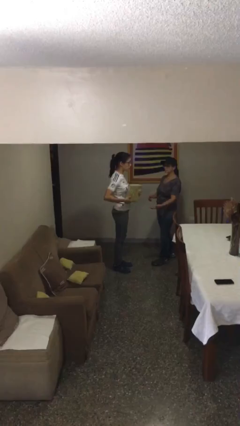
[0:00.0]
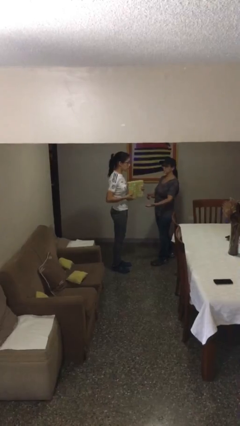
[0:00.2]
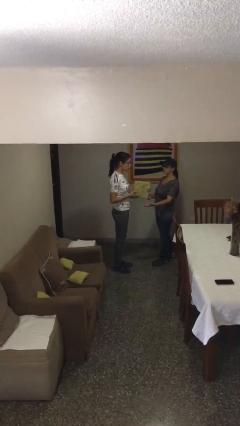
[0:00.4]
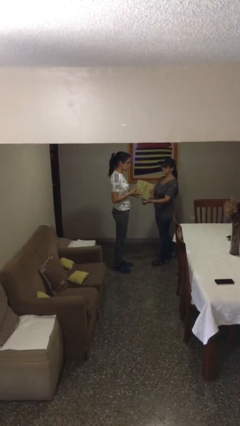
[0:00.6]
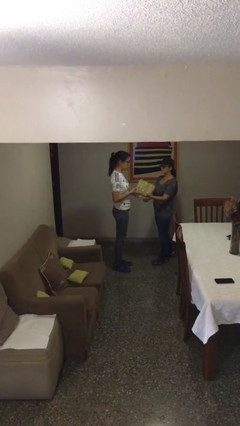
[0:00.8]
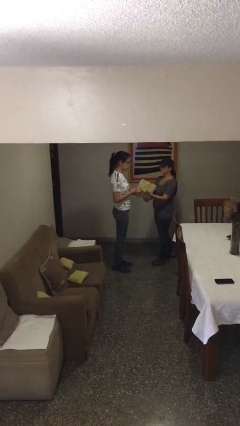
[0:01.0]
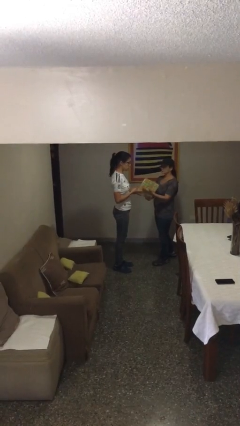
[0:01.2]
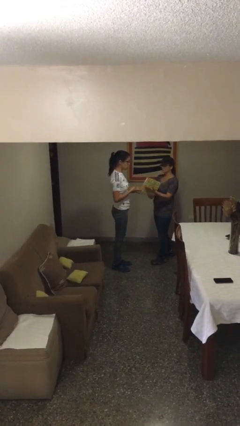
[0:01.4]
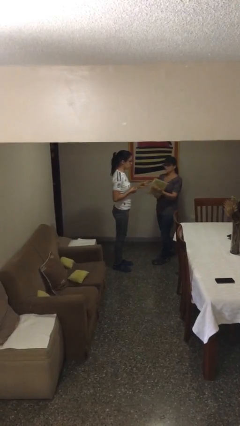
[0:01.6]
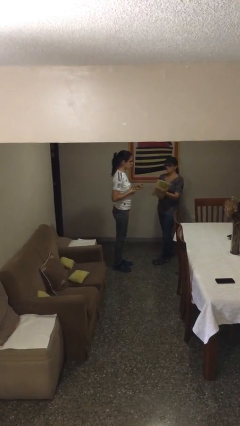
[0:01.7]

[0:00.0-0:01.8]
person transfers object to person

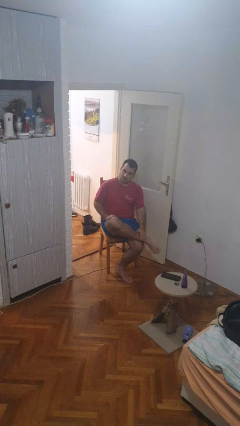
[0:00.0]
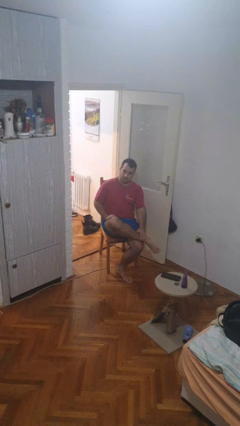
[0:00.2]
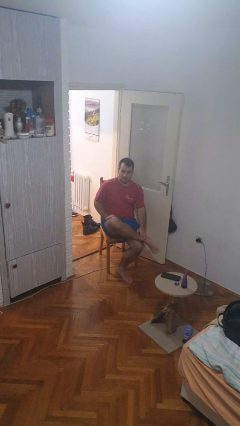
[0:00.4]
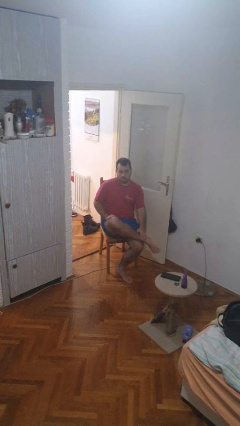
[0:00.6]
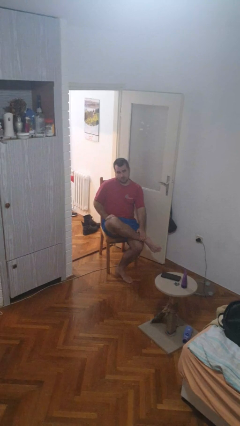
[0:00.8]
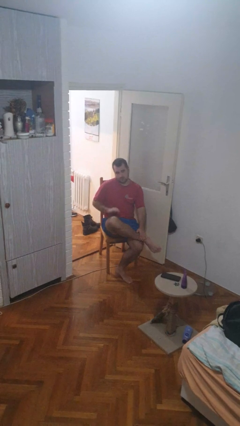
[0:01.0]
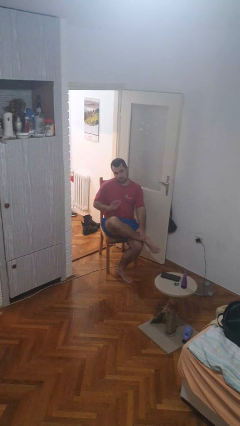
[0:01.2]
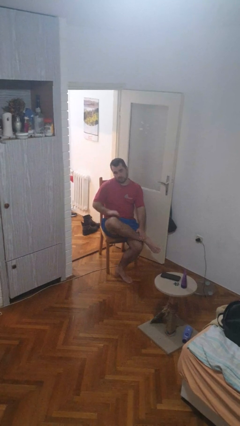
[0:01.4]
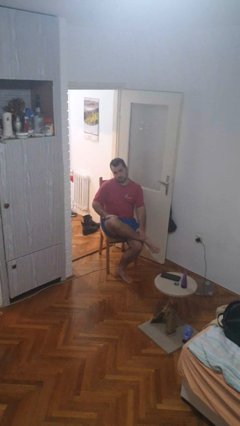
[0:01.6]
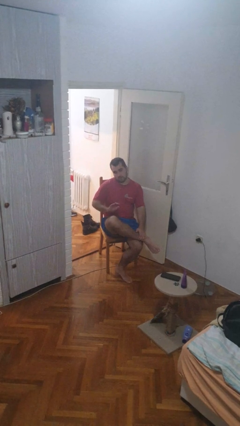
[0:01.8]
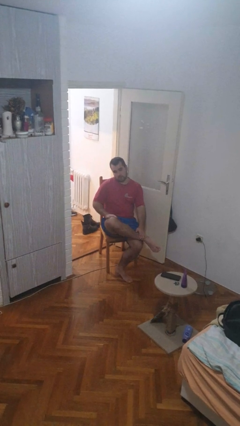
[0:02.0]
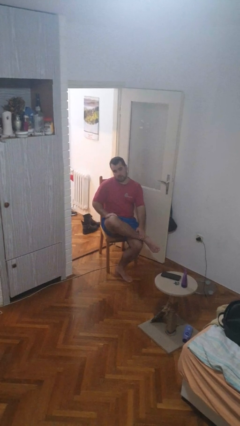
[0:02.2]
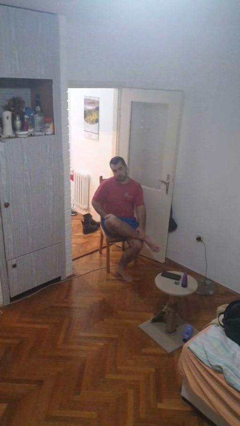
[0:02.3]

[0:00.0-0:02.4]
person slaps hands on thighs

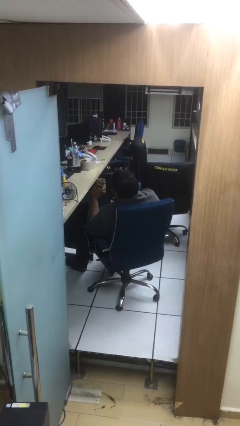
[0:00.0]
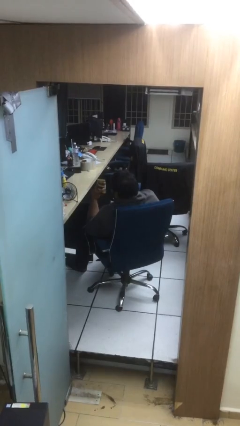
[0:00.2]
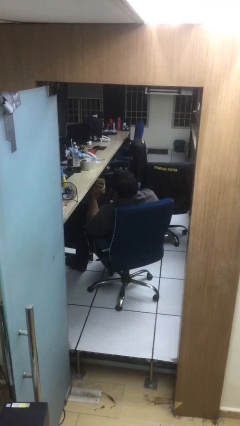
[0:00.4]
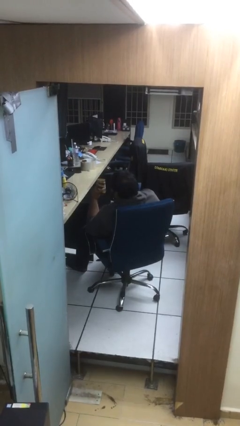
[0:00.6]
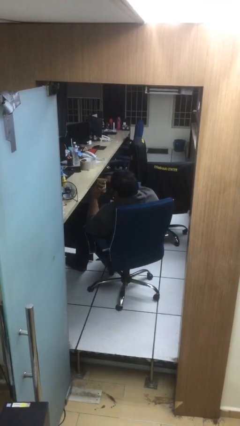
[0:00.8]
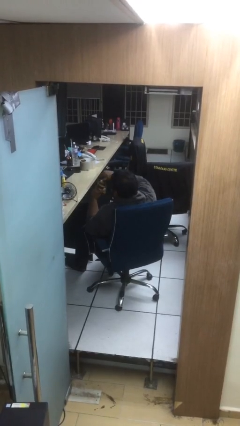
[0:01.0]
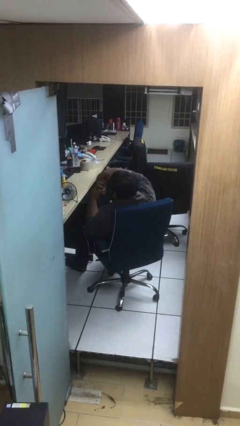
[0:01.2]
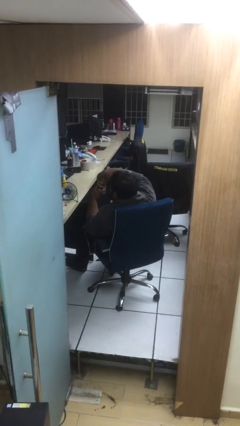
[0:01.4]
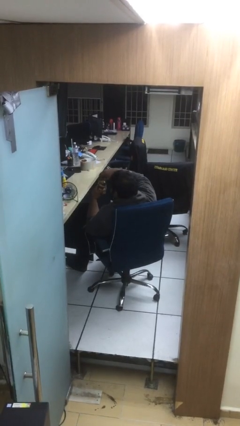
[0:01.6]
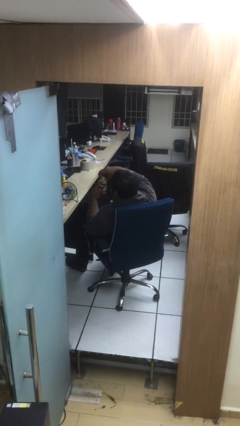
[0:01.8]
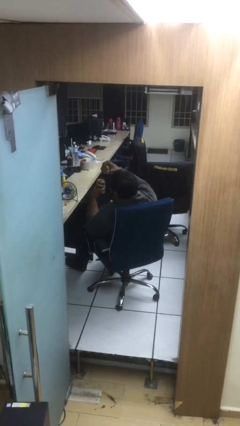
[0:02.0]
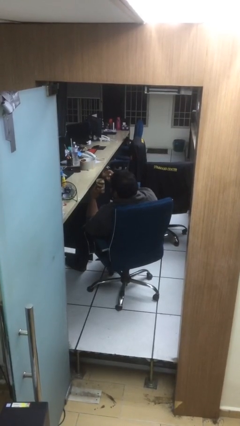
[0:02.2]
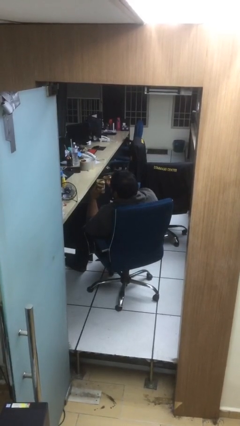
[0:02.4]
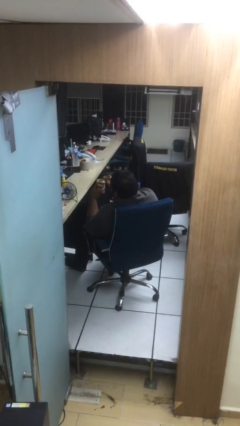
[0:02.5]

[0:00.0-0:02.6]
person opens jar

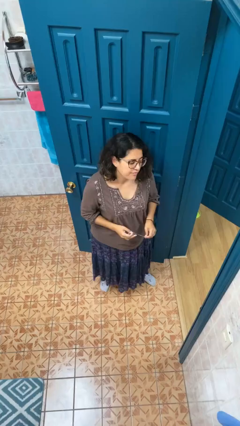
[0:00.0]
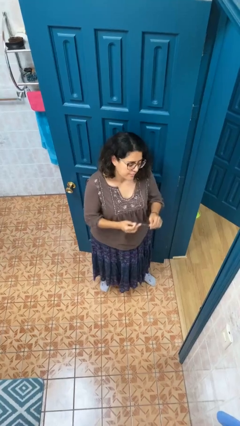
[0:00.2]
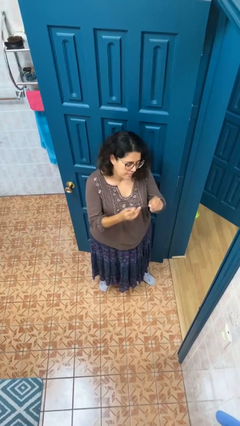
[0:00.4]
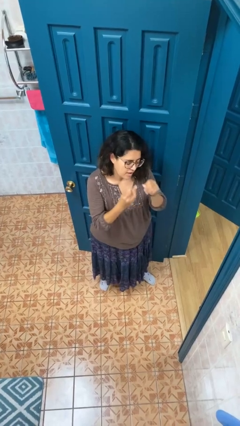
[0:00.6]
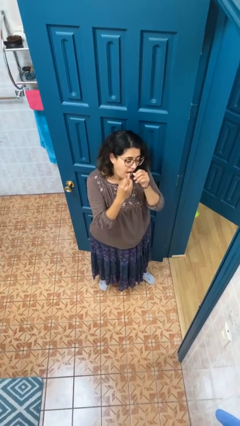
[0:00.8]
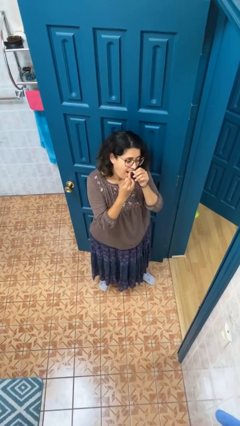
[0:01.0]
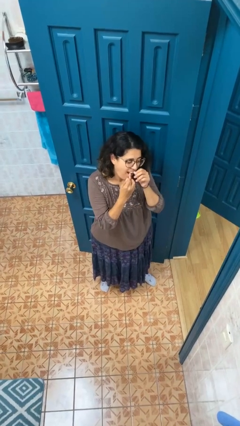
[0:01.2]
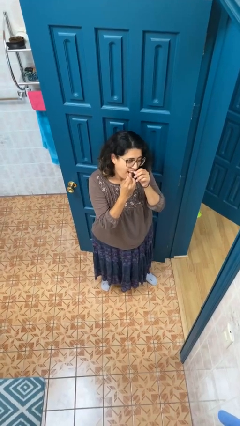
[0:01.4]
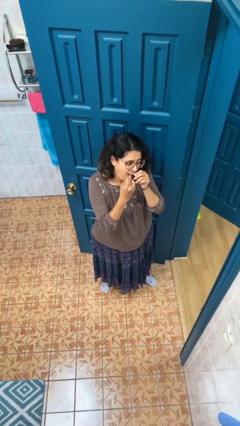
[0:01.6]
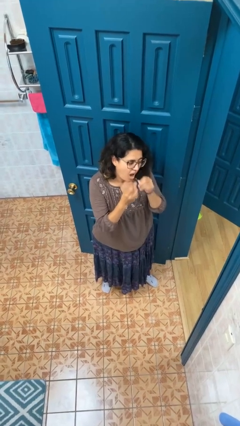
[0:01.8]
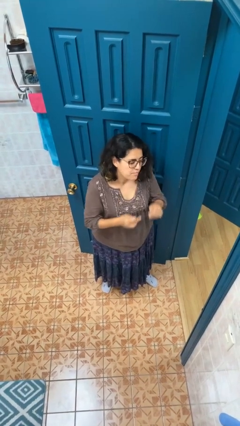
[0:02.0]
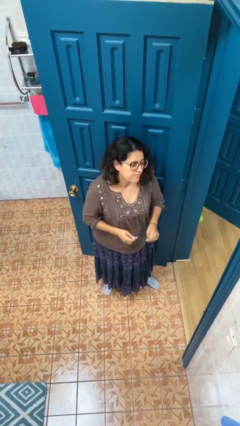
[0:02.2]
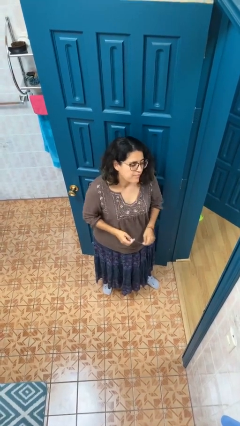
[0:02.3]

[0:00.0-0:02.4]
person flosses

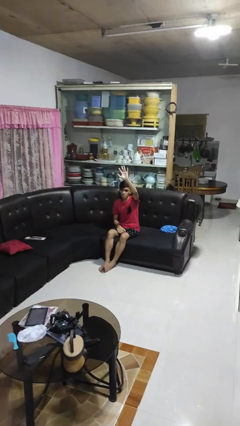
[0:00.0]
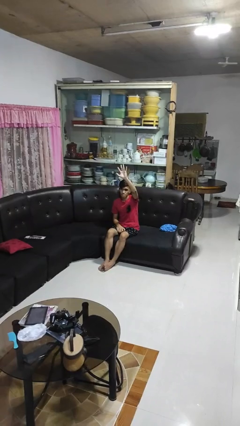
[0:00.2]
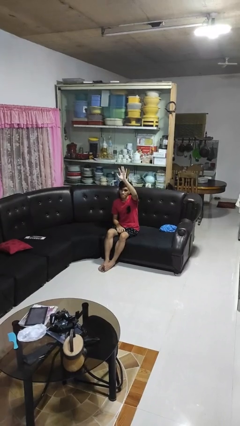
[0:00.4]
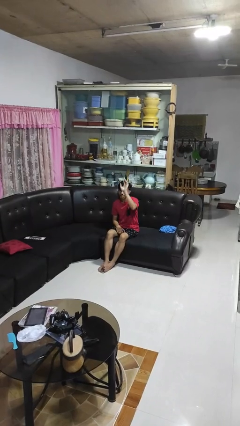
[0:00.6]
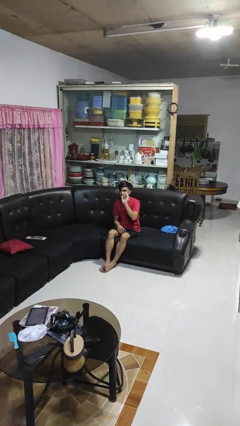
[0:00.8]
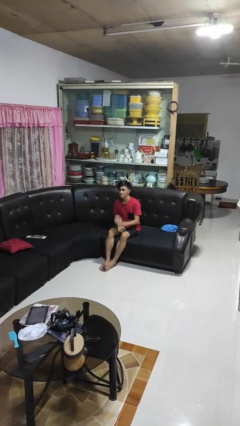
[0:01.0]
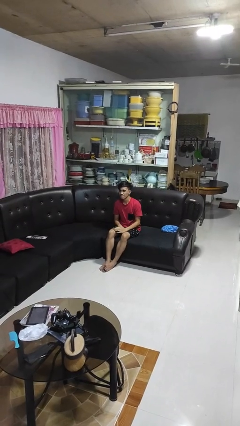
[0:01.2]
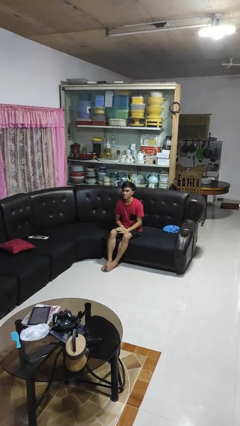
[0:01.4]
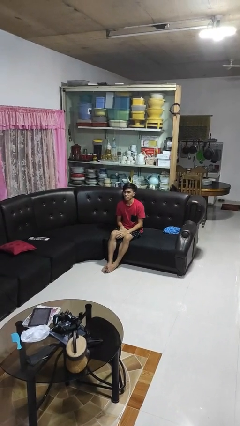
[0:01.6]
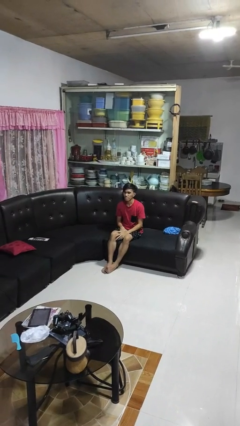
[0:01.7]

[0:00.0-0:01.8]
person gestures lower hand

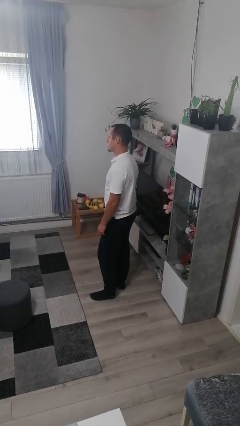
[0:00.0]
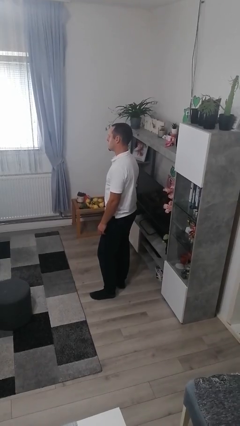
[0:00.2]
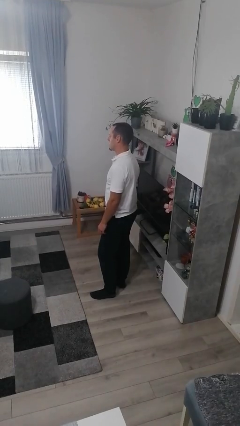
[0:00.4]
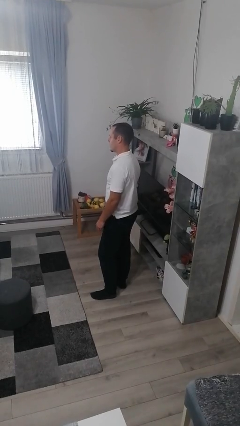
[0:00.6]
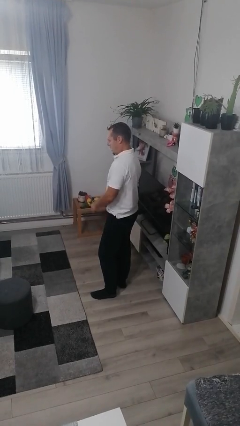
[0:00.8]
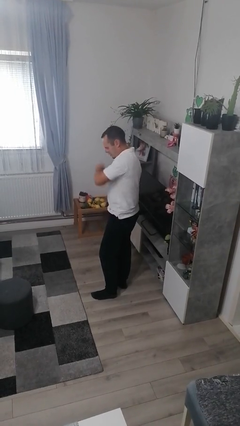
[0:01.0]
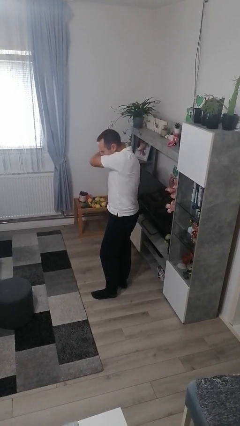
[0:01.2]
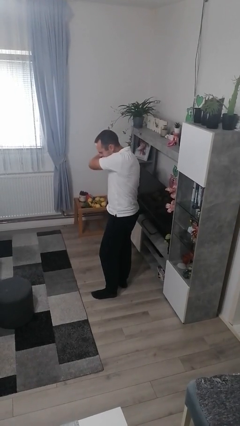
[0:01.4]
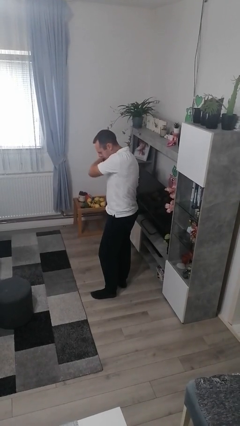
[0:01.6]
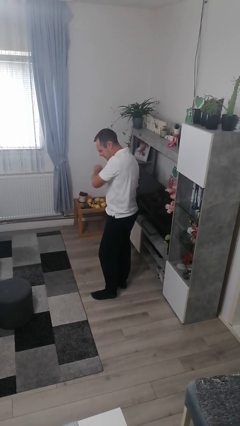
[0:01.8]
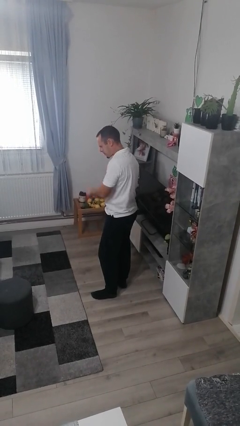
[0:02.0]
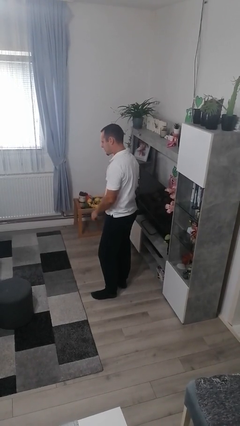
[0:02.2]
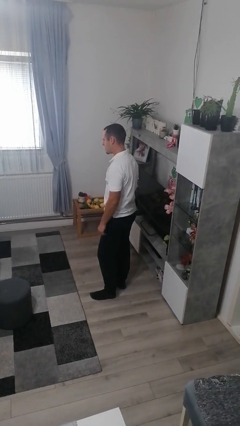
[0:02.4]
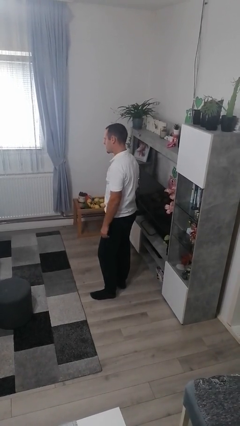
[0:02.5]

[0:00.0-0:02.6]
person sneezes into arm

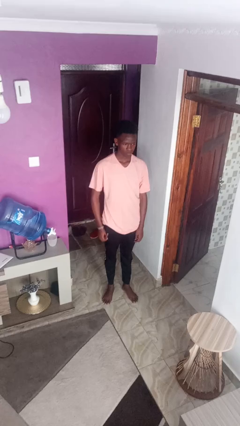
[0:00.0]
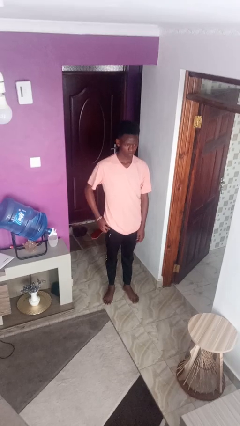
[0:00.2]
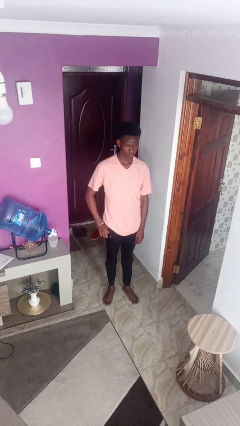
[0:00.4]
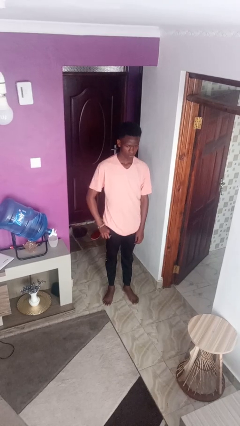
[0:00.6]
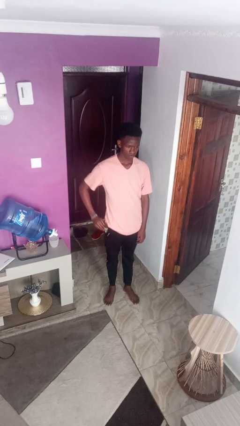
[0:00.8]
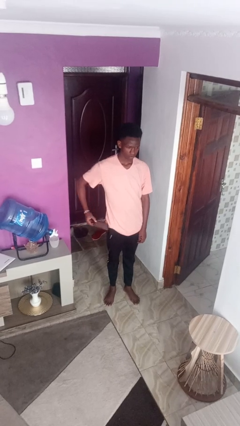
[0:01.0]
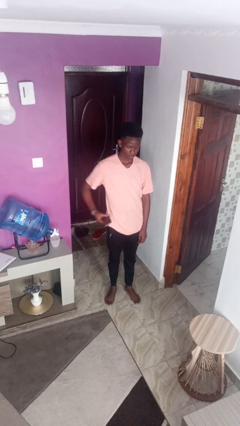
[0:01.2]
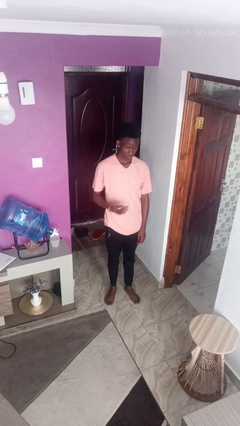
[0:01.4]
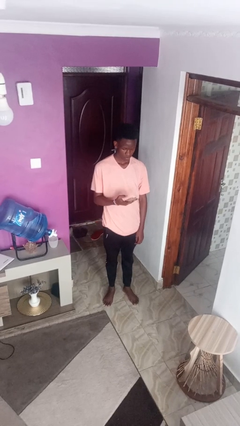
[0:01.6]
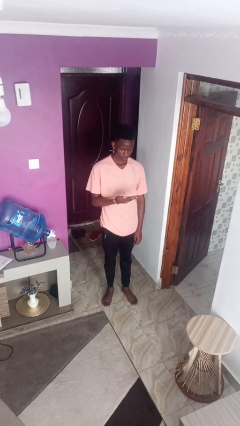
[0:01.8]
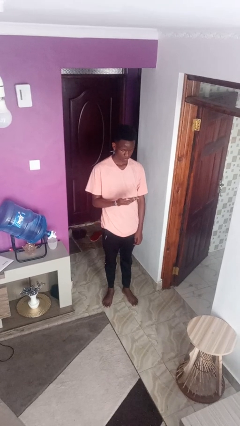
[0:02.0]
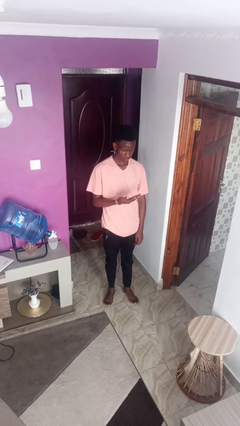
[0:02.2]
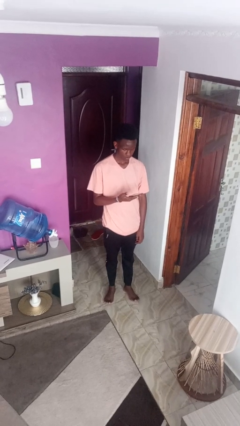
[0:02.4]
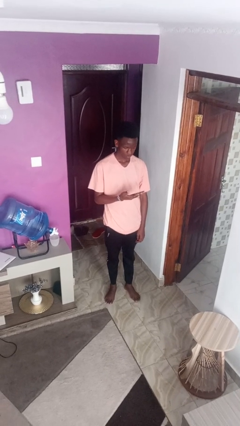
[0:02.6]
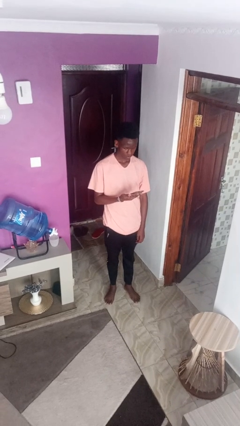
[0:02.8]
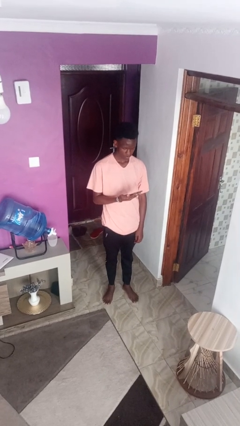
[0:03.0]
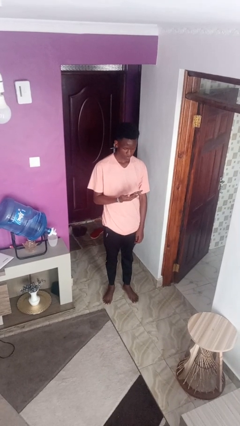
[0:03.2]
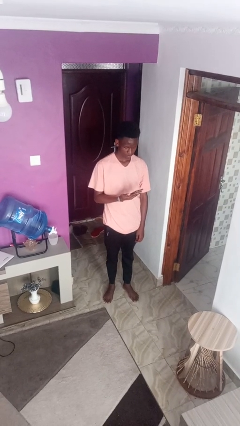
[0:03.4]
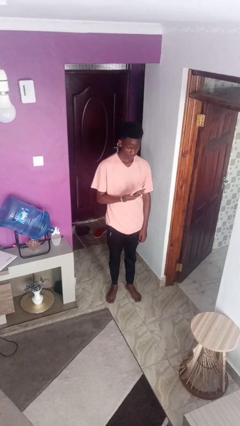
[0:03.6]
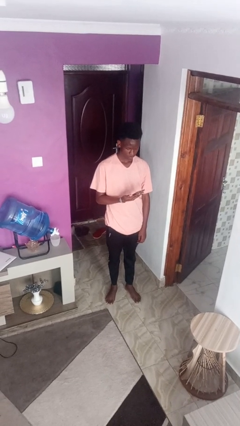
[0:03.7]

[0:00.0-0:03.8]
person takes phone from pocket
